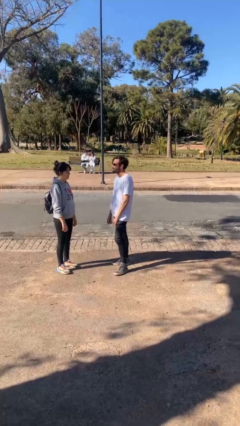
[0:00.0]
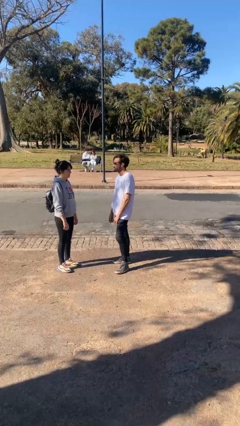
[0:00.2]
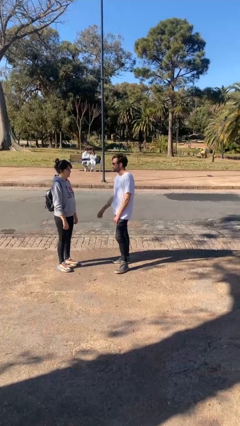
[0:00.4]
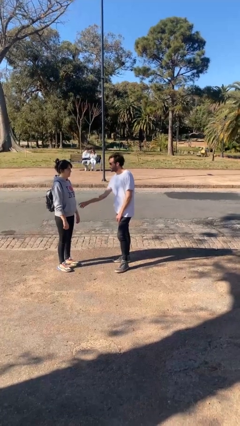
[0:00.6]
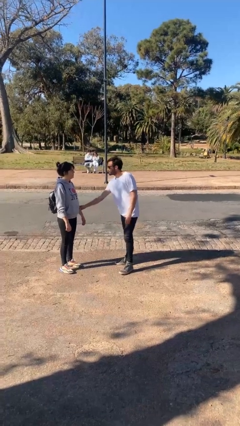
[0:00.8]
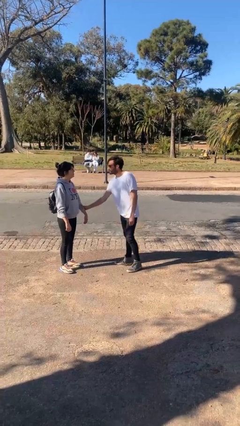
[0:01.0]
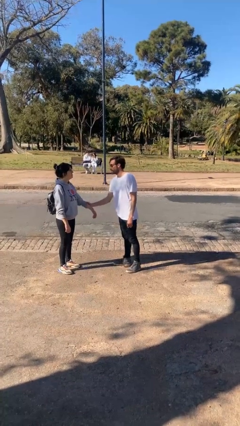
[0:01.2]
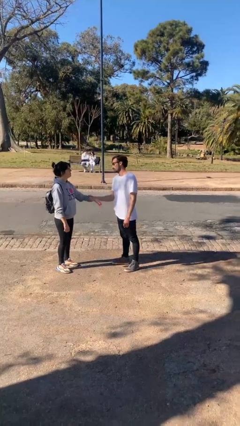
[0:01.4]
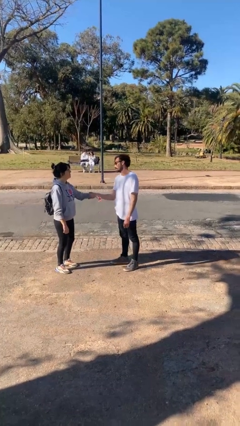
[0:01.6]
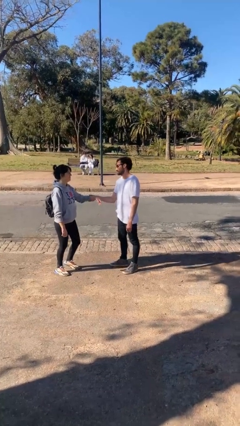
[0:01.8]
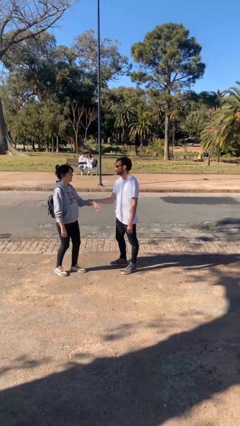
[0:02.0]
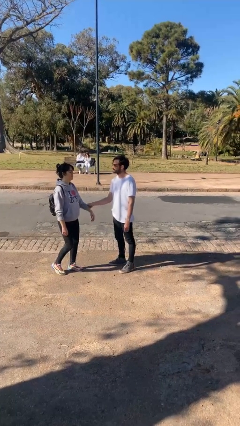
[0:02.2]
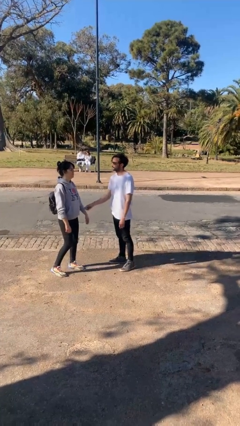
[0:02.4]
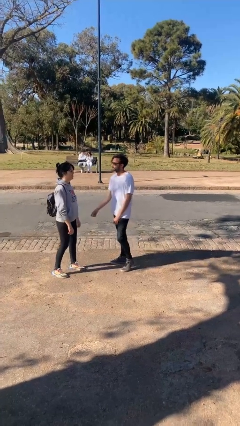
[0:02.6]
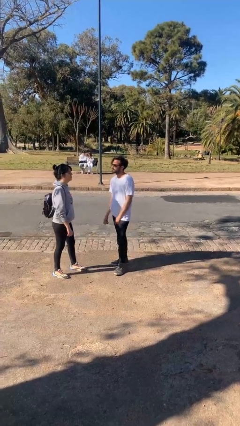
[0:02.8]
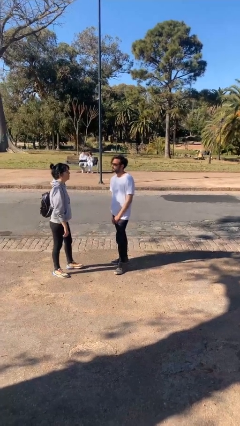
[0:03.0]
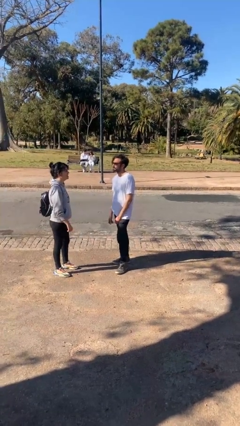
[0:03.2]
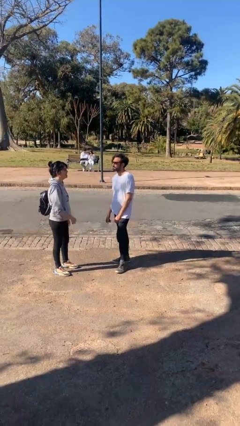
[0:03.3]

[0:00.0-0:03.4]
person grabs person by forearm

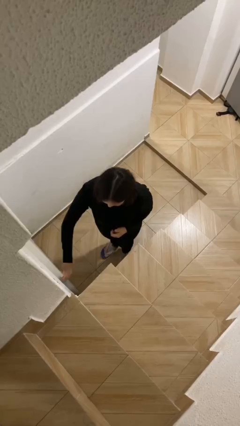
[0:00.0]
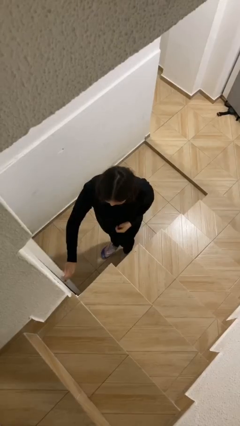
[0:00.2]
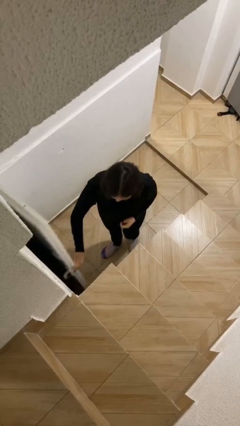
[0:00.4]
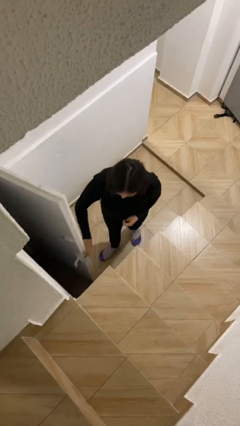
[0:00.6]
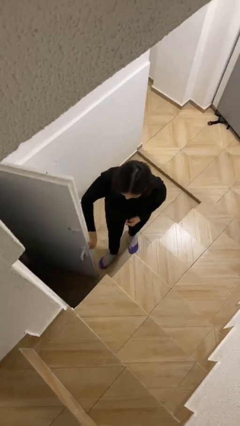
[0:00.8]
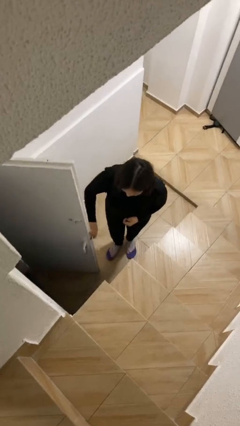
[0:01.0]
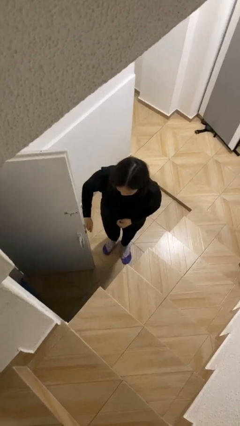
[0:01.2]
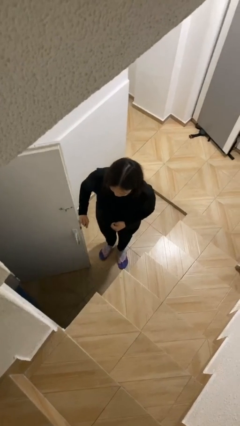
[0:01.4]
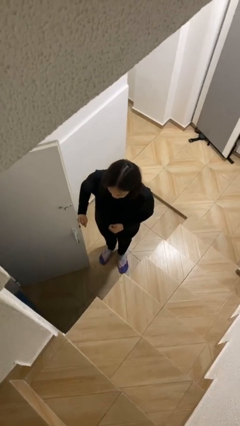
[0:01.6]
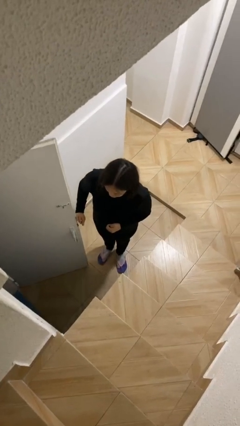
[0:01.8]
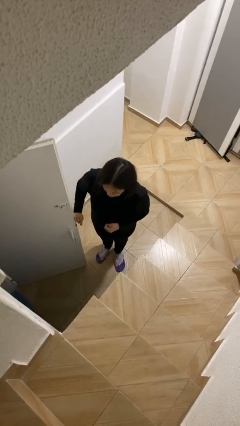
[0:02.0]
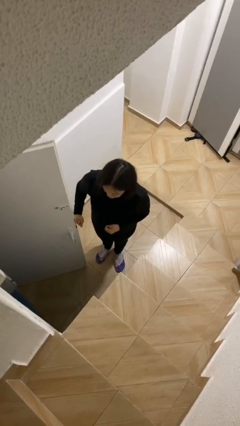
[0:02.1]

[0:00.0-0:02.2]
person opens facility door

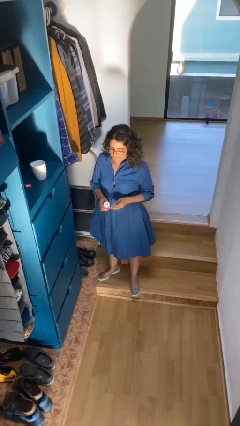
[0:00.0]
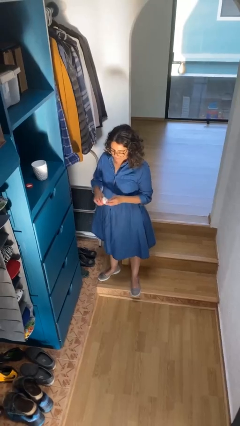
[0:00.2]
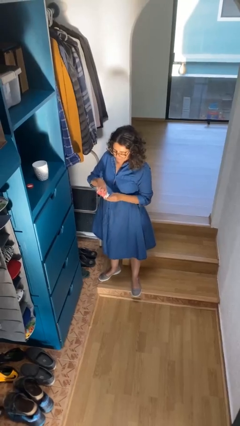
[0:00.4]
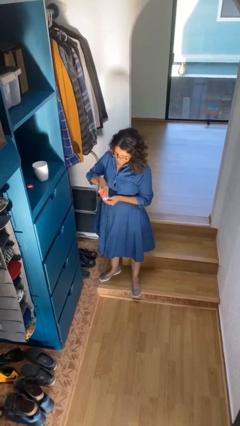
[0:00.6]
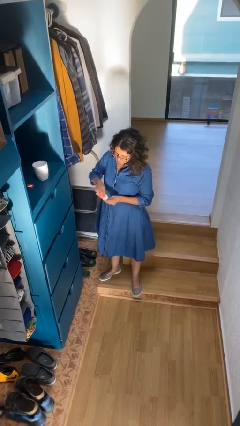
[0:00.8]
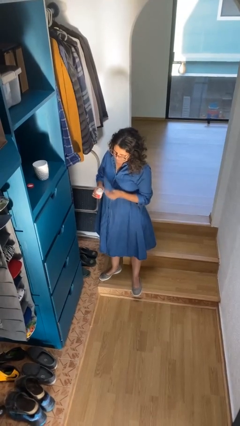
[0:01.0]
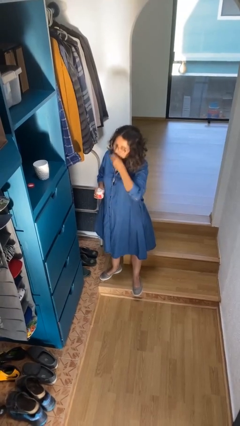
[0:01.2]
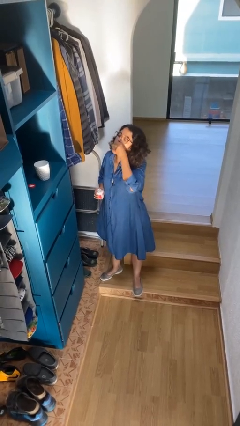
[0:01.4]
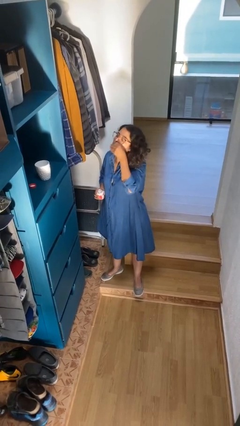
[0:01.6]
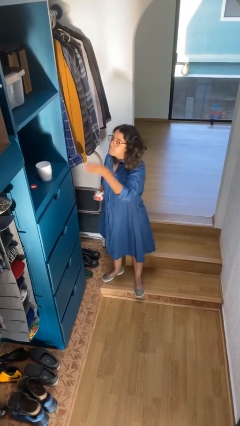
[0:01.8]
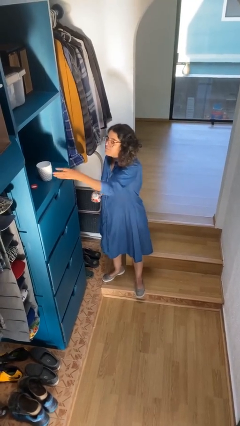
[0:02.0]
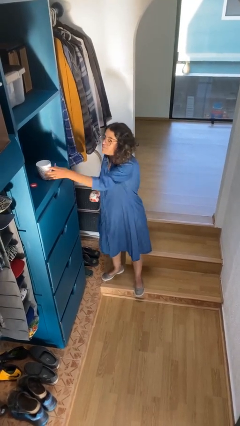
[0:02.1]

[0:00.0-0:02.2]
person takes medicine pills

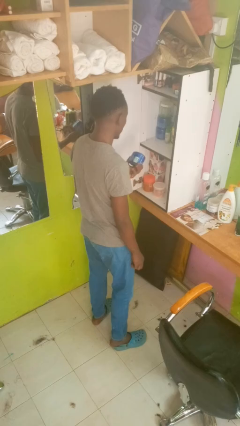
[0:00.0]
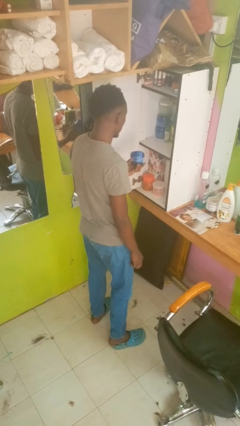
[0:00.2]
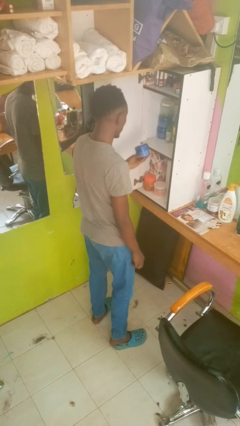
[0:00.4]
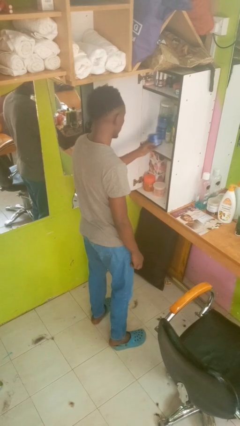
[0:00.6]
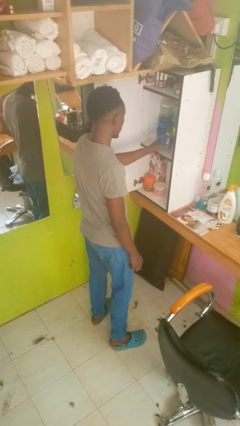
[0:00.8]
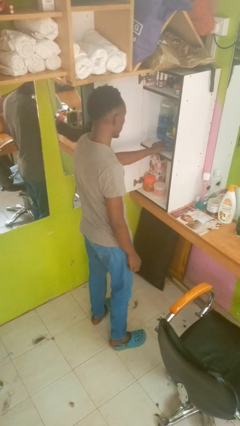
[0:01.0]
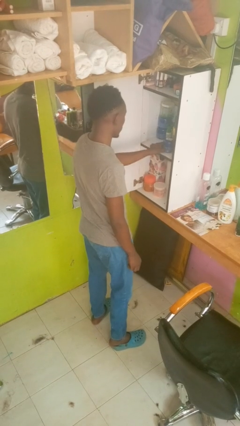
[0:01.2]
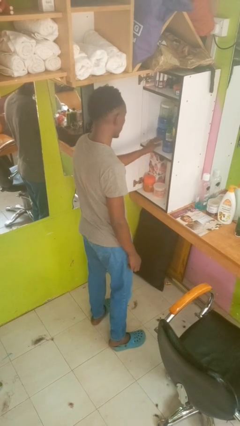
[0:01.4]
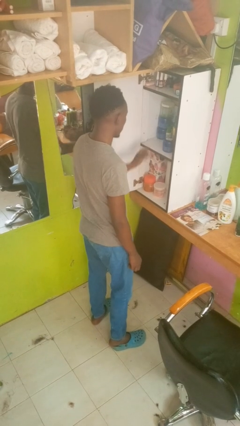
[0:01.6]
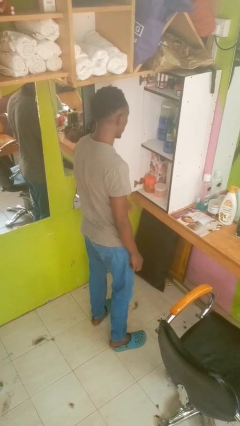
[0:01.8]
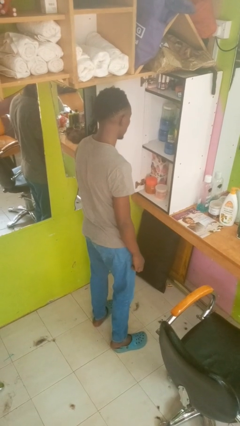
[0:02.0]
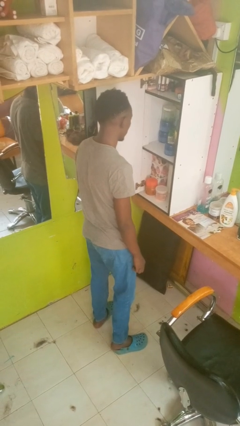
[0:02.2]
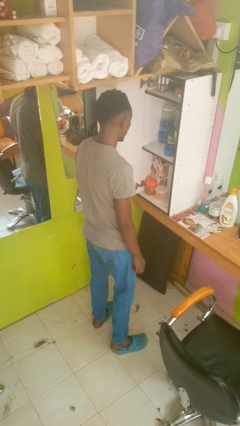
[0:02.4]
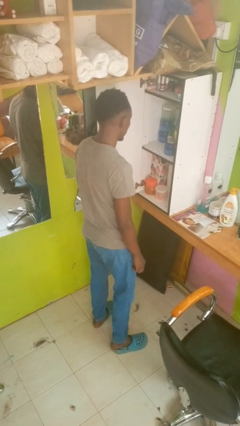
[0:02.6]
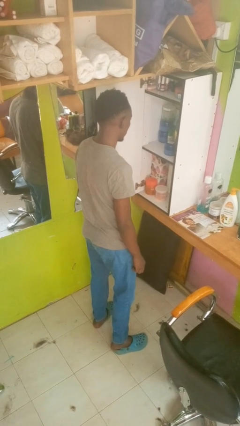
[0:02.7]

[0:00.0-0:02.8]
person puts down object into cabinet

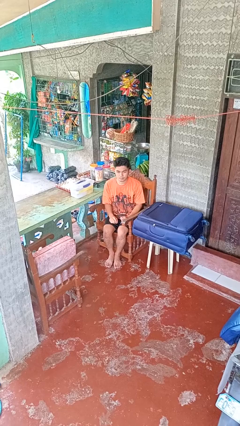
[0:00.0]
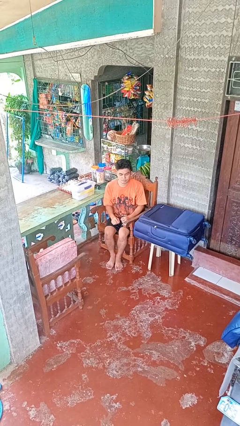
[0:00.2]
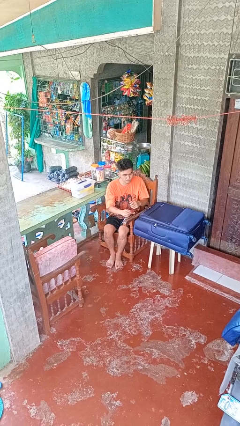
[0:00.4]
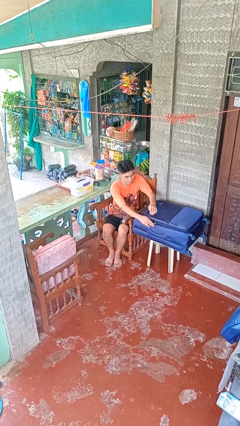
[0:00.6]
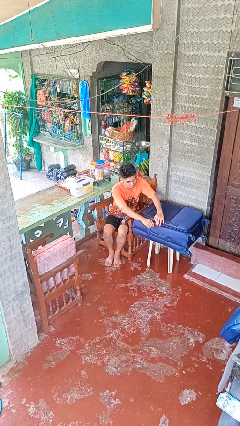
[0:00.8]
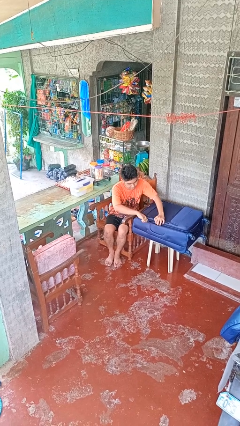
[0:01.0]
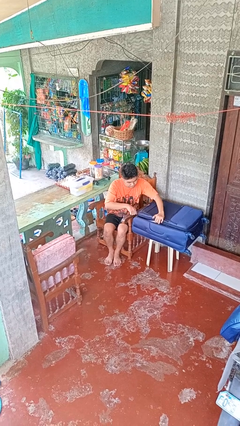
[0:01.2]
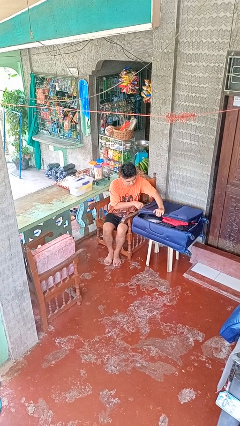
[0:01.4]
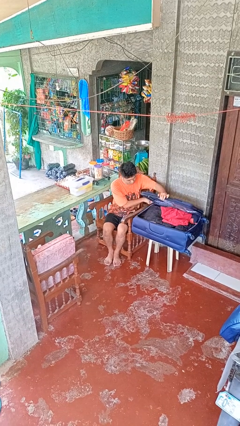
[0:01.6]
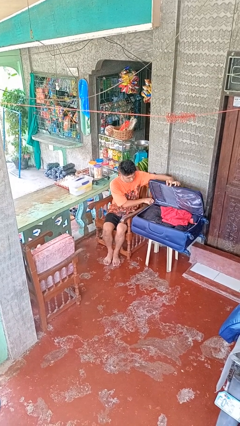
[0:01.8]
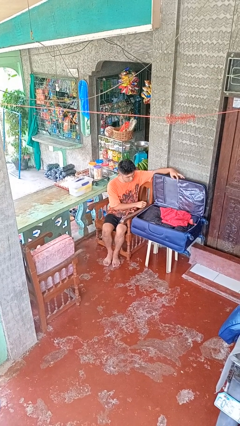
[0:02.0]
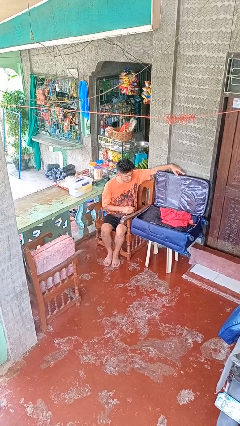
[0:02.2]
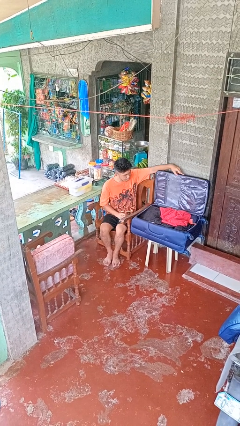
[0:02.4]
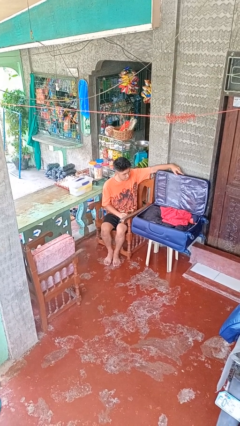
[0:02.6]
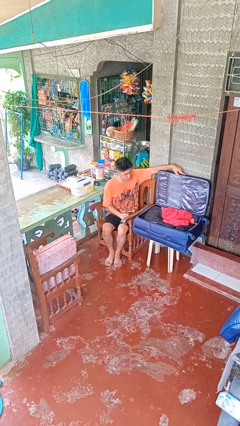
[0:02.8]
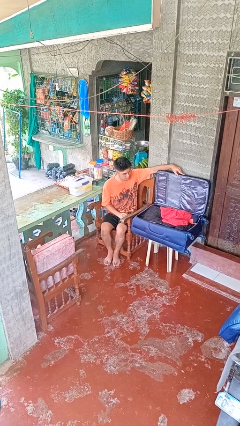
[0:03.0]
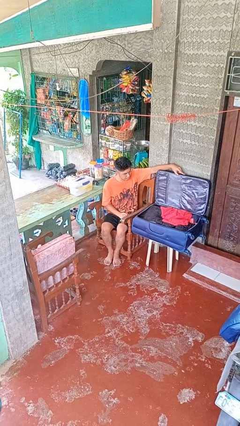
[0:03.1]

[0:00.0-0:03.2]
person opens suitcase

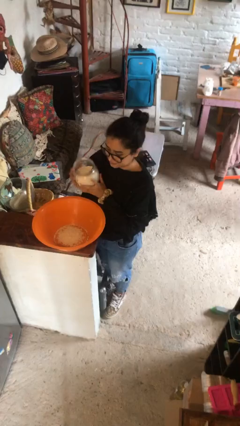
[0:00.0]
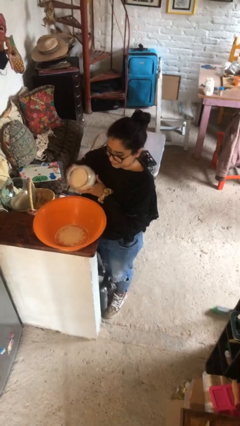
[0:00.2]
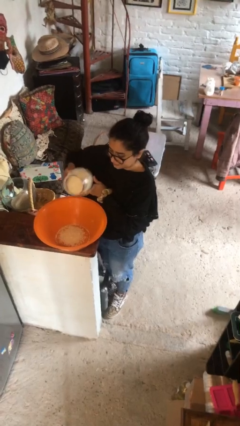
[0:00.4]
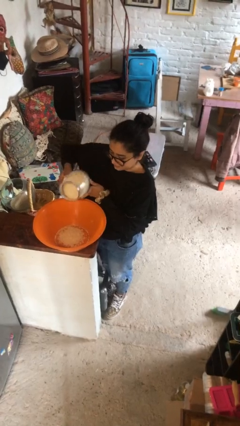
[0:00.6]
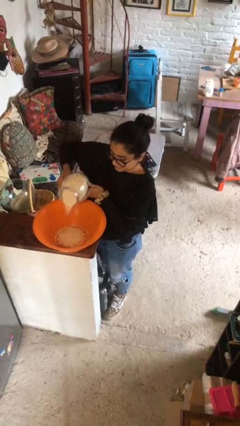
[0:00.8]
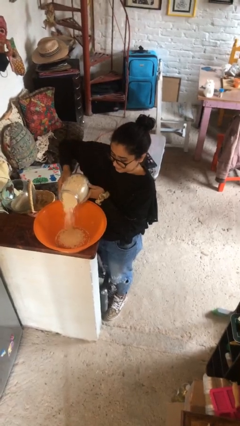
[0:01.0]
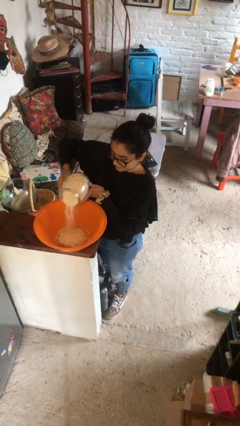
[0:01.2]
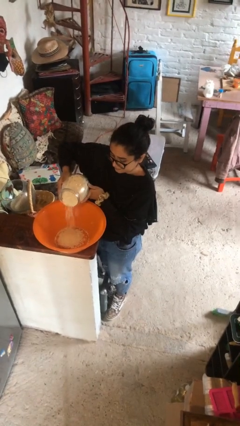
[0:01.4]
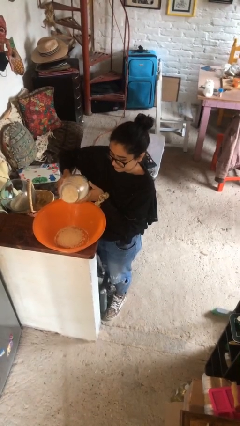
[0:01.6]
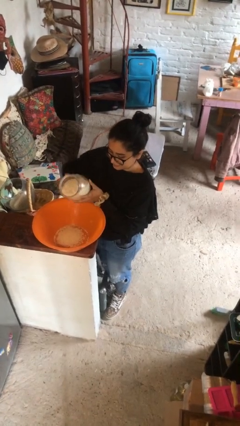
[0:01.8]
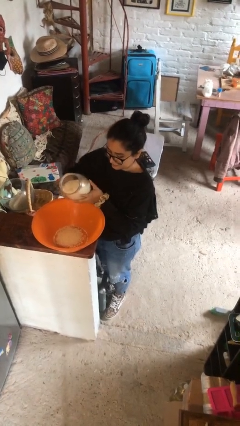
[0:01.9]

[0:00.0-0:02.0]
person pours into bowl

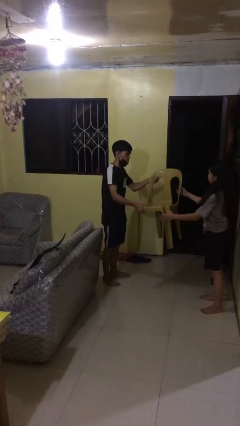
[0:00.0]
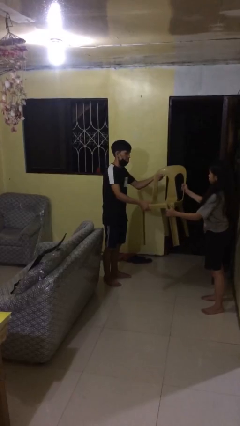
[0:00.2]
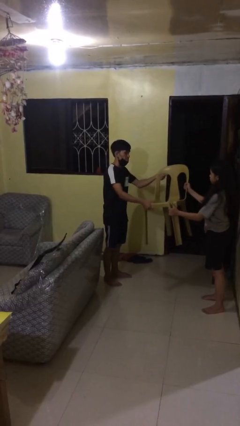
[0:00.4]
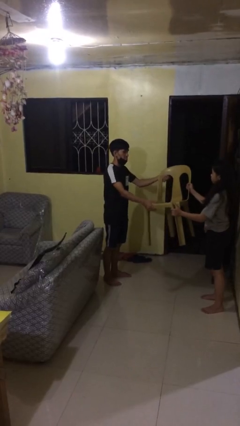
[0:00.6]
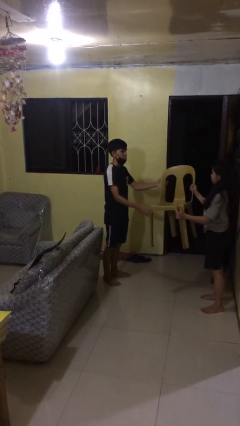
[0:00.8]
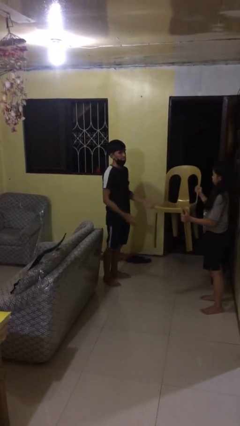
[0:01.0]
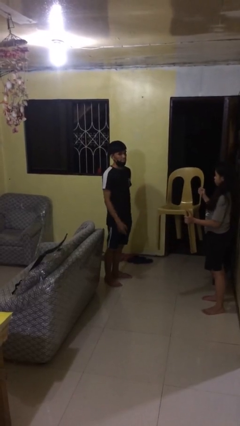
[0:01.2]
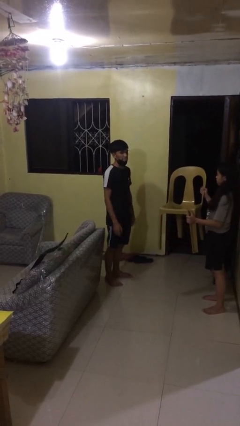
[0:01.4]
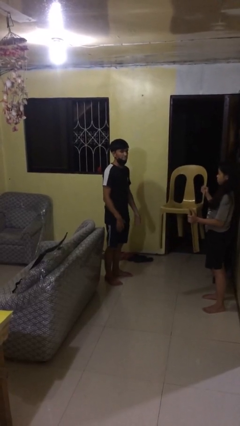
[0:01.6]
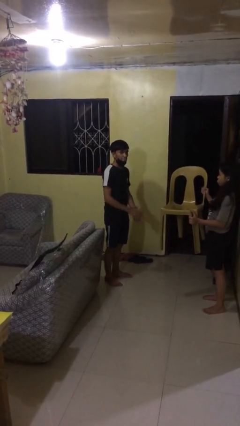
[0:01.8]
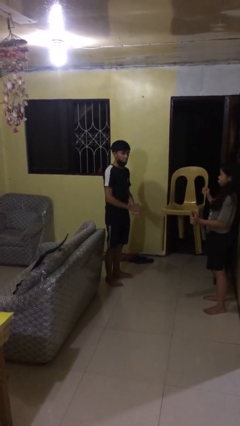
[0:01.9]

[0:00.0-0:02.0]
person transfers object to person
